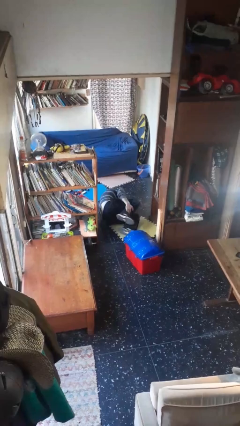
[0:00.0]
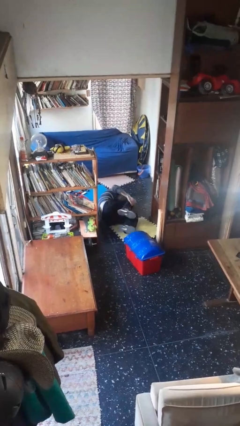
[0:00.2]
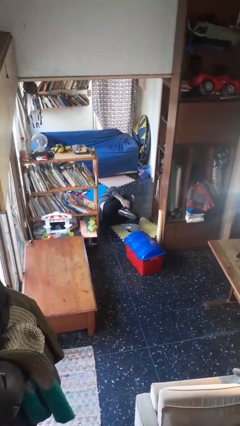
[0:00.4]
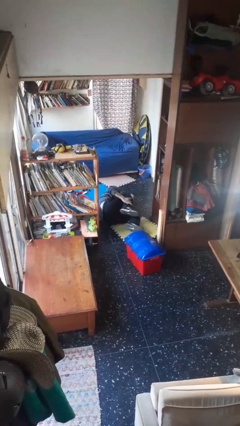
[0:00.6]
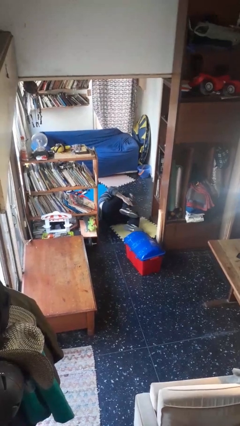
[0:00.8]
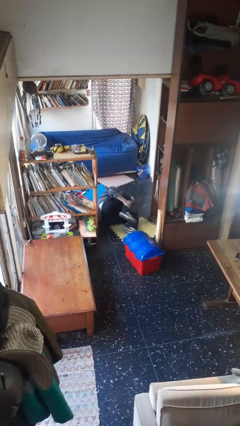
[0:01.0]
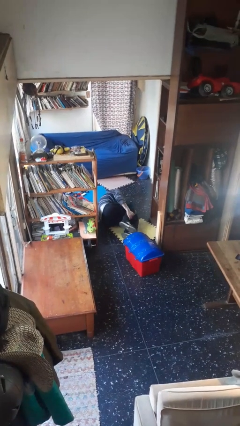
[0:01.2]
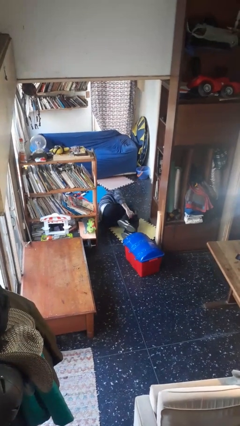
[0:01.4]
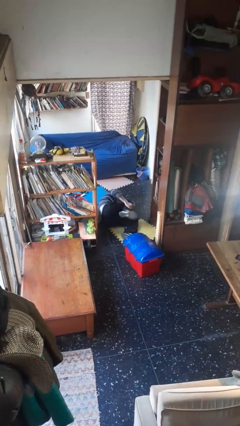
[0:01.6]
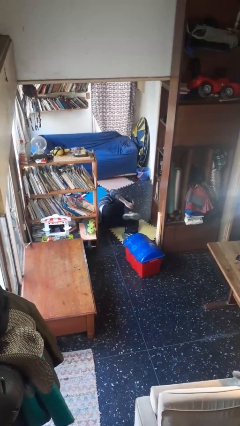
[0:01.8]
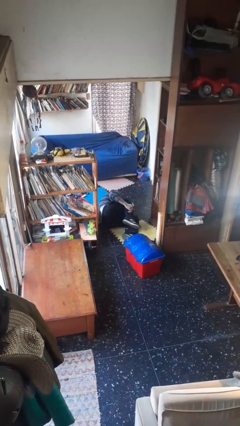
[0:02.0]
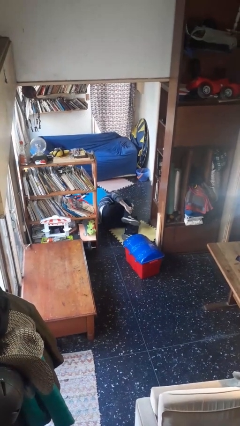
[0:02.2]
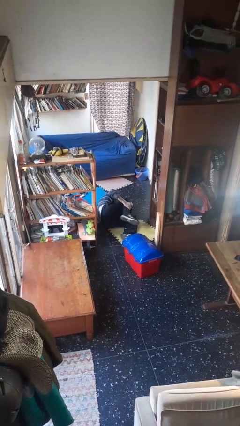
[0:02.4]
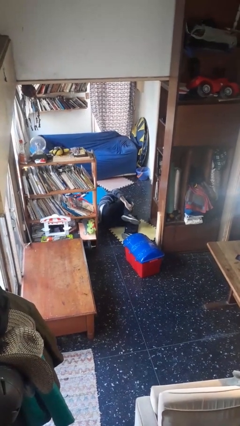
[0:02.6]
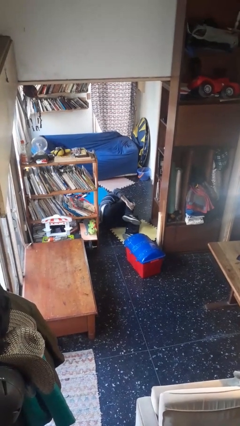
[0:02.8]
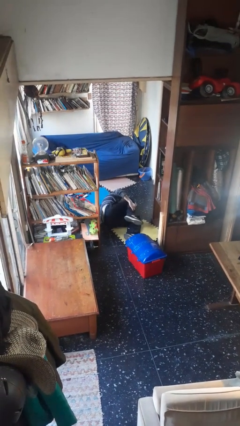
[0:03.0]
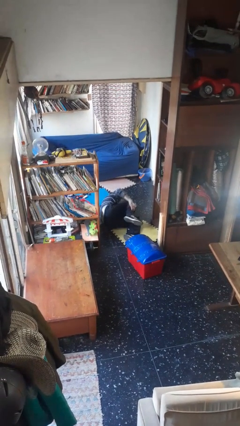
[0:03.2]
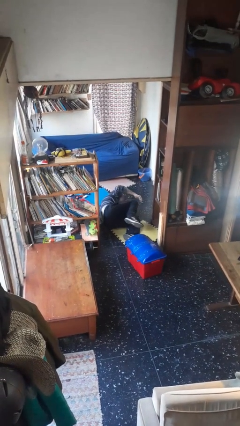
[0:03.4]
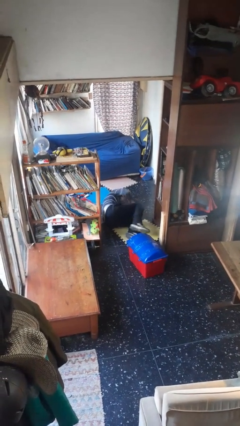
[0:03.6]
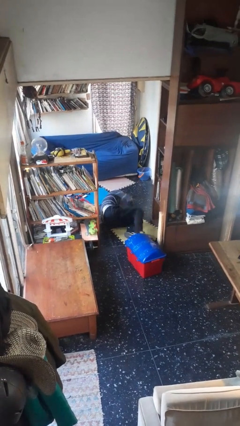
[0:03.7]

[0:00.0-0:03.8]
person lies down on floor

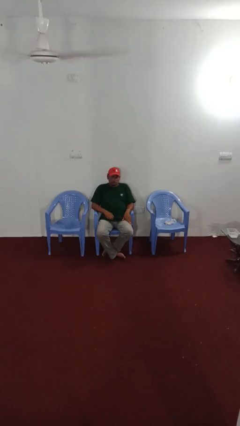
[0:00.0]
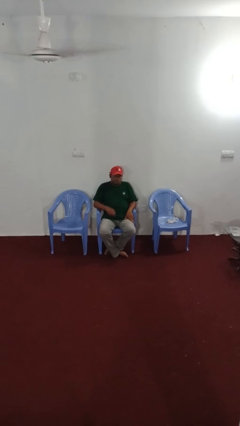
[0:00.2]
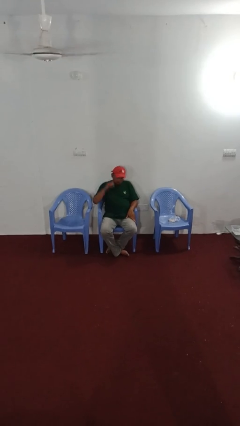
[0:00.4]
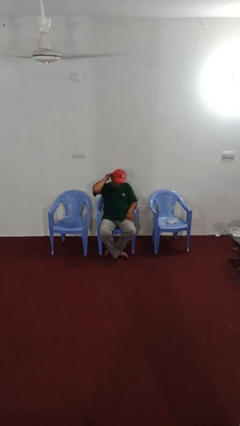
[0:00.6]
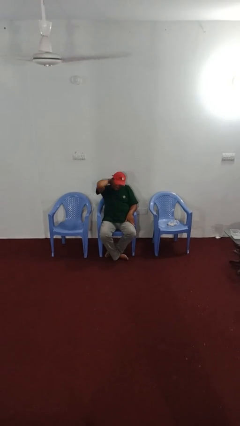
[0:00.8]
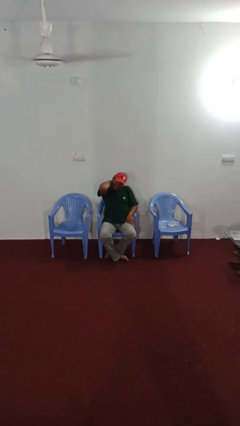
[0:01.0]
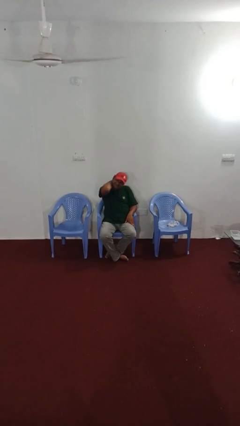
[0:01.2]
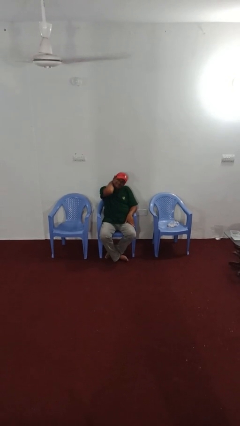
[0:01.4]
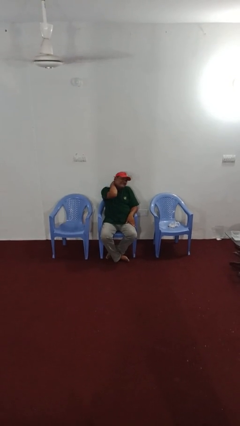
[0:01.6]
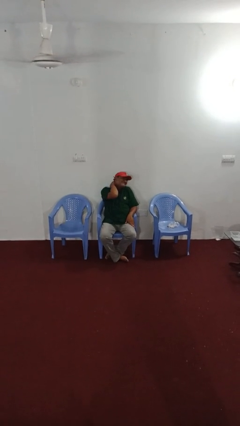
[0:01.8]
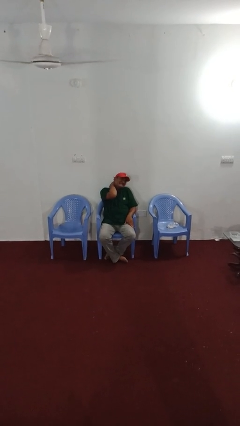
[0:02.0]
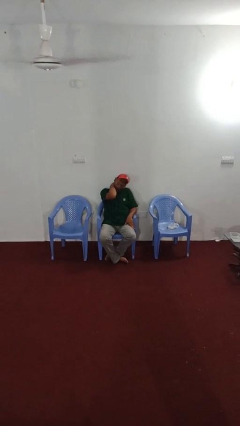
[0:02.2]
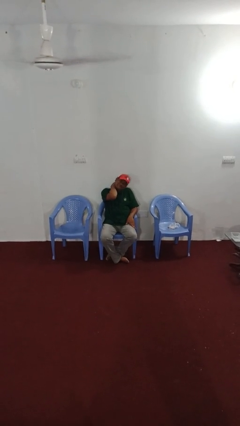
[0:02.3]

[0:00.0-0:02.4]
person rubs neck

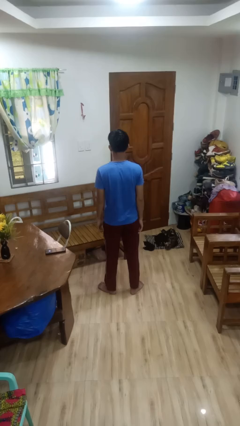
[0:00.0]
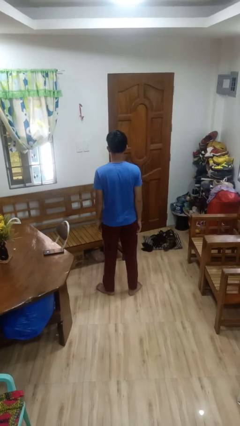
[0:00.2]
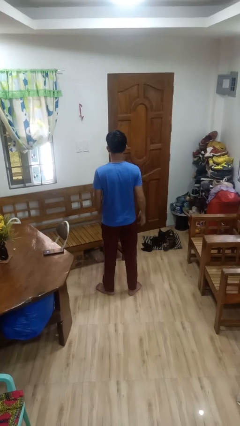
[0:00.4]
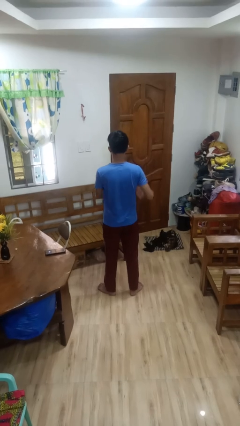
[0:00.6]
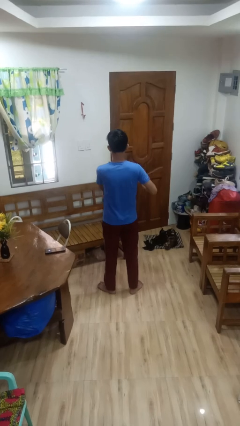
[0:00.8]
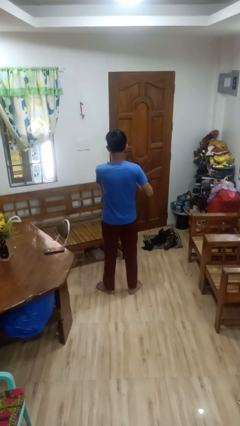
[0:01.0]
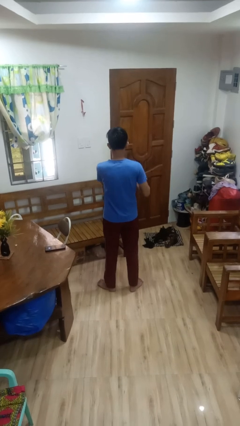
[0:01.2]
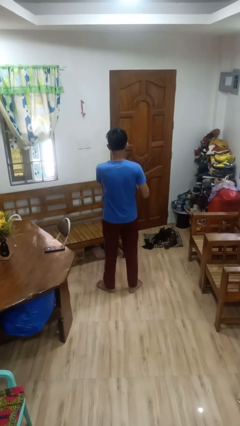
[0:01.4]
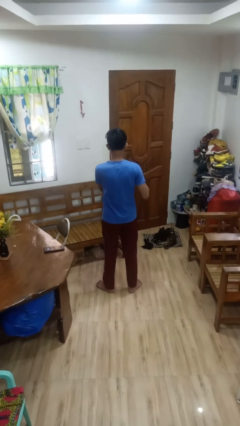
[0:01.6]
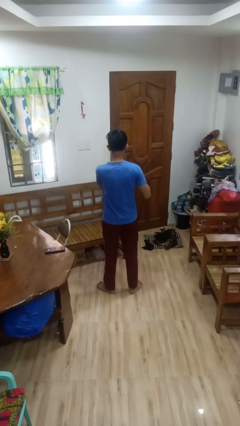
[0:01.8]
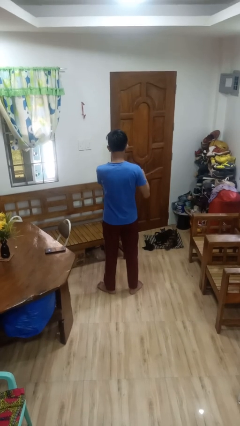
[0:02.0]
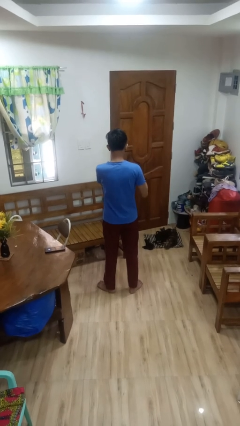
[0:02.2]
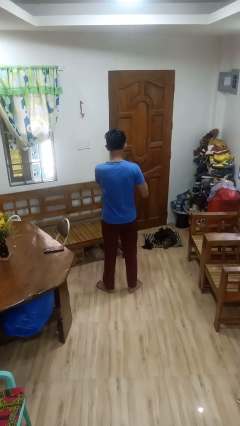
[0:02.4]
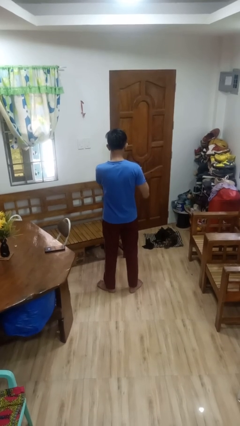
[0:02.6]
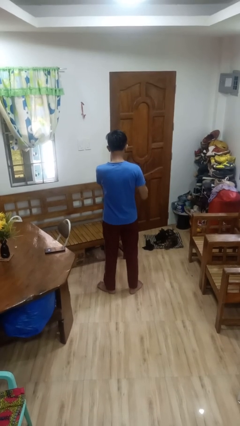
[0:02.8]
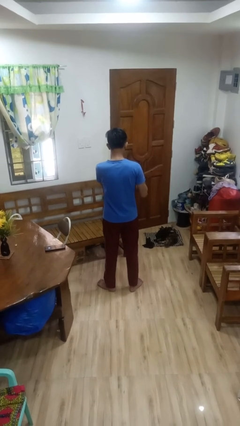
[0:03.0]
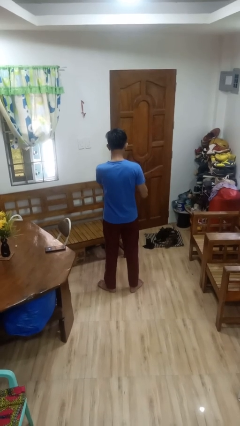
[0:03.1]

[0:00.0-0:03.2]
person cracks knuckles

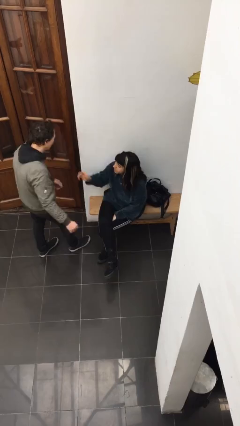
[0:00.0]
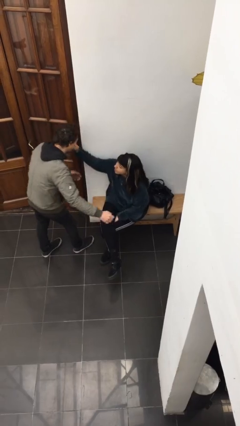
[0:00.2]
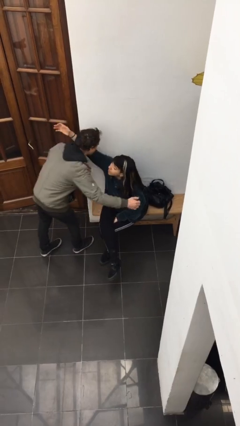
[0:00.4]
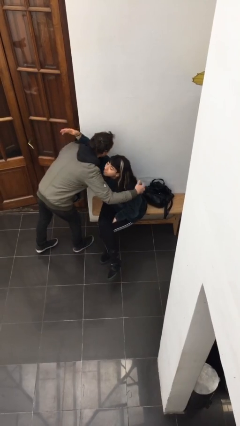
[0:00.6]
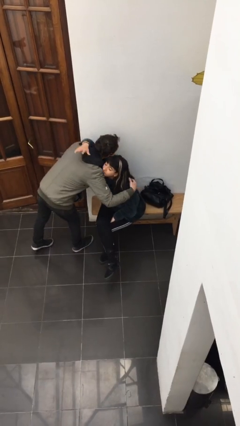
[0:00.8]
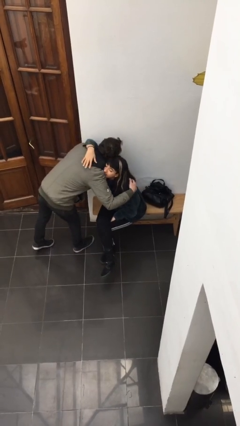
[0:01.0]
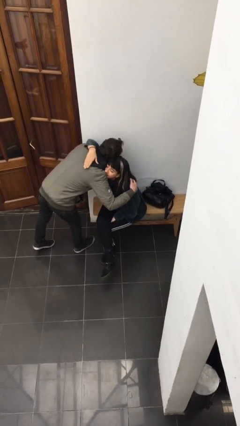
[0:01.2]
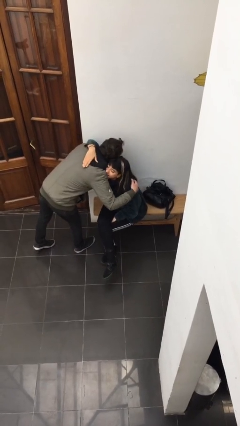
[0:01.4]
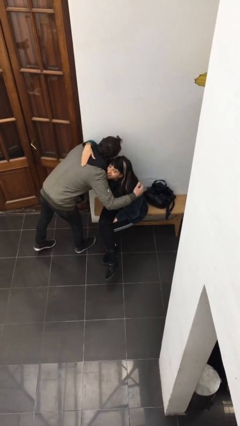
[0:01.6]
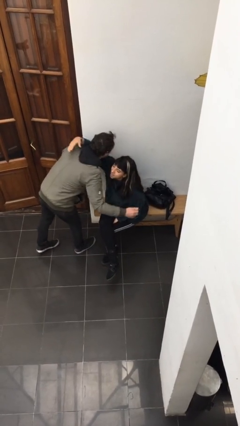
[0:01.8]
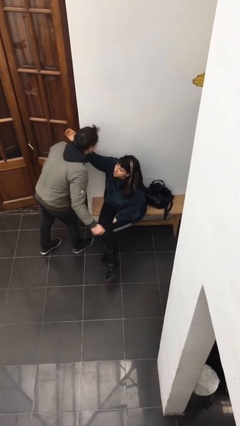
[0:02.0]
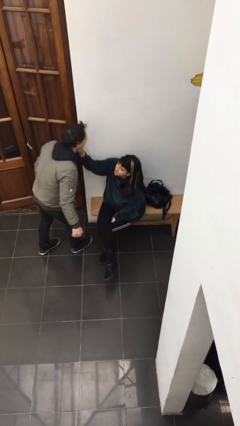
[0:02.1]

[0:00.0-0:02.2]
person embraces person

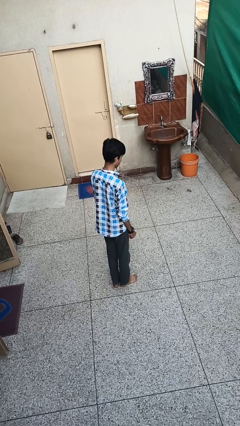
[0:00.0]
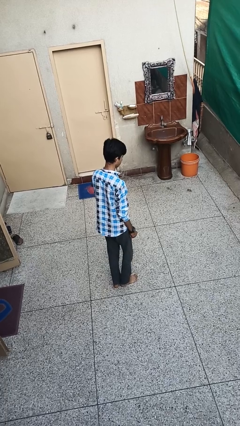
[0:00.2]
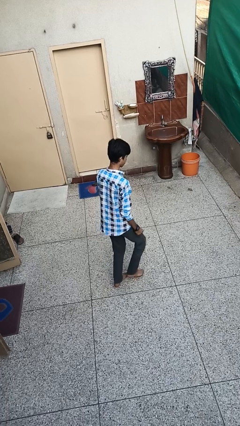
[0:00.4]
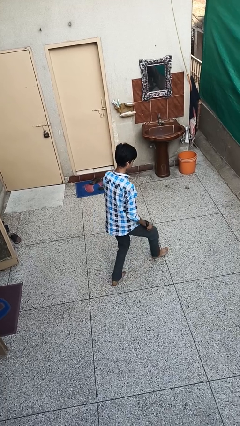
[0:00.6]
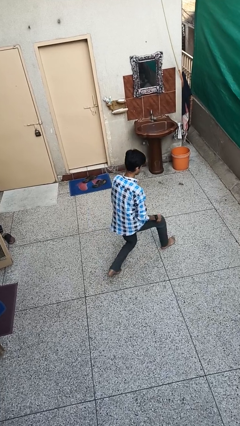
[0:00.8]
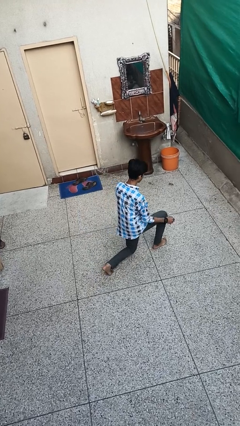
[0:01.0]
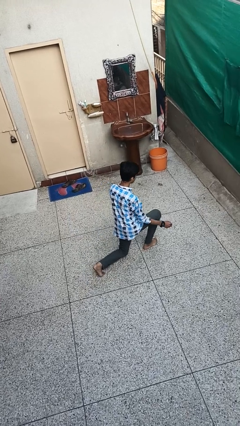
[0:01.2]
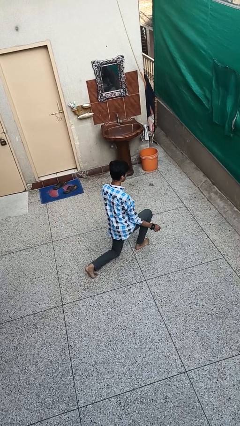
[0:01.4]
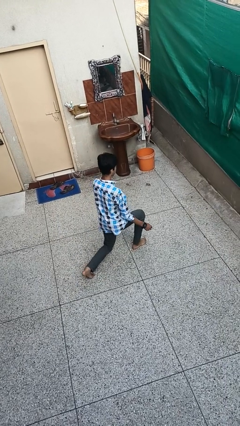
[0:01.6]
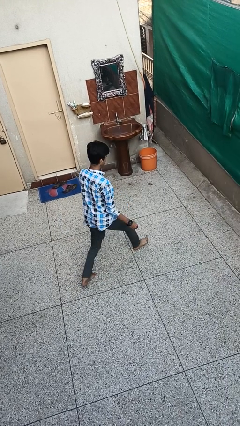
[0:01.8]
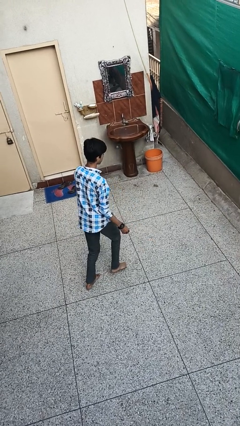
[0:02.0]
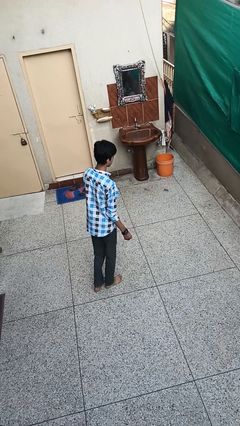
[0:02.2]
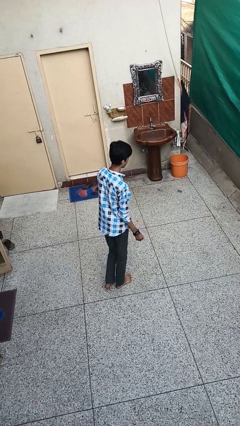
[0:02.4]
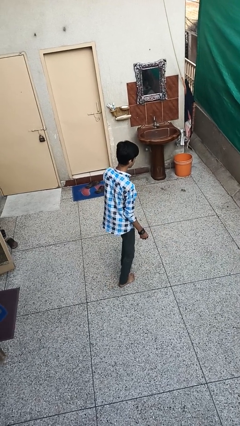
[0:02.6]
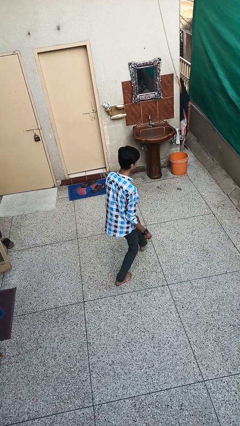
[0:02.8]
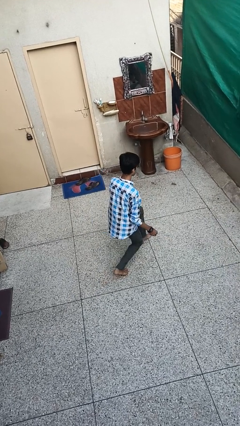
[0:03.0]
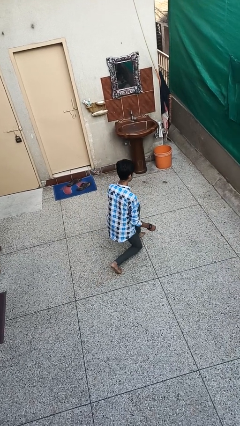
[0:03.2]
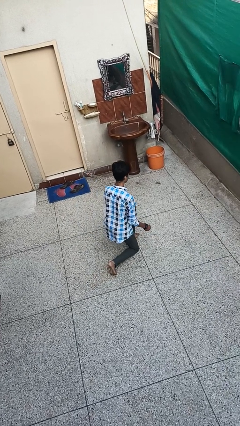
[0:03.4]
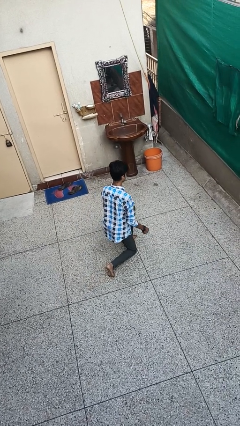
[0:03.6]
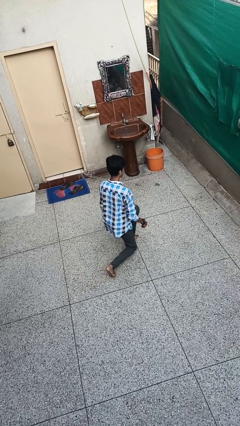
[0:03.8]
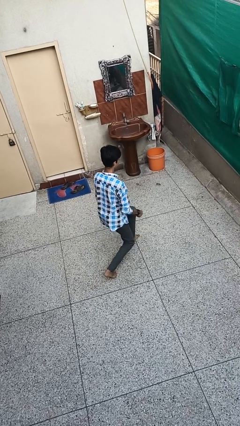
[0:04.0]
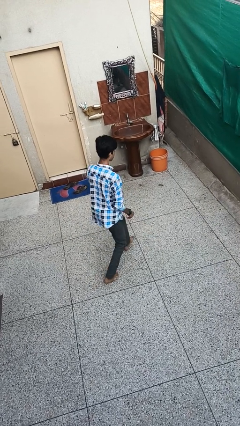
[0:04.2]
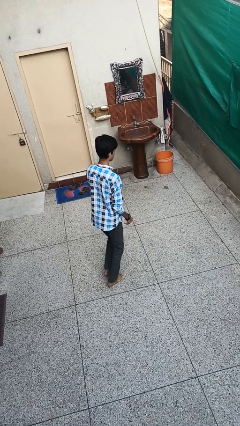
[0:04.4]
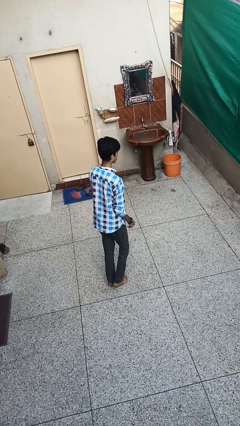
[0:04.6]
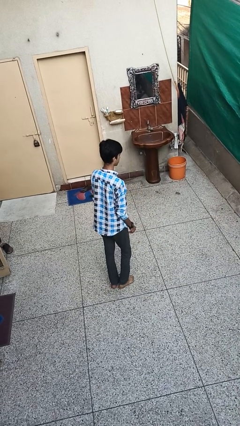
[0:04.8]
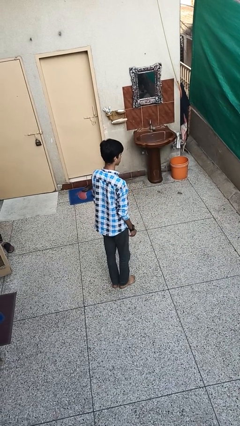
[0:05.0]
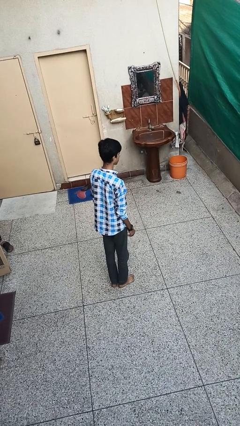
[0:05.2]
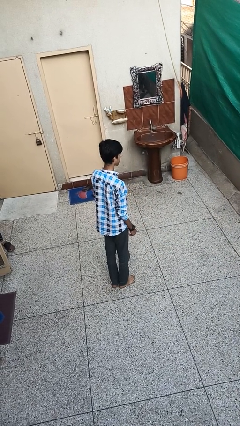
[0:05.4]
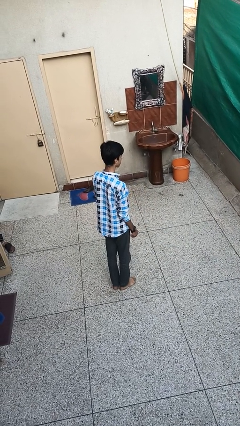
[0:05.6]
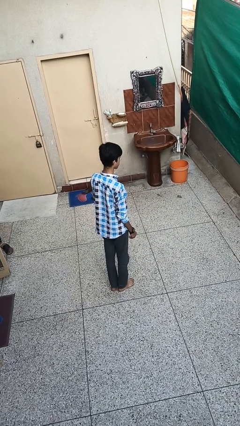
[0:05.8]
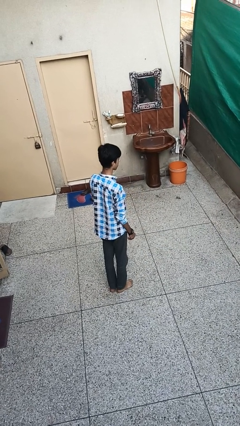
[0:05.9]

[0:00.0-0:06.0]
person exercises with lunges
